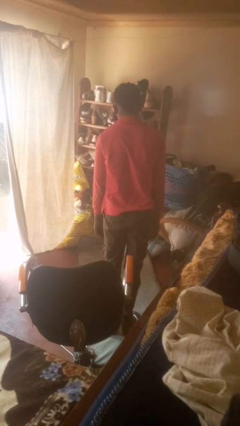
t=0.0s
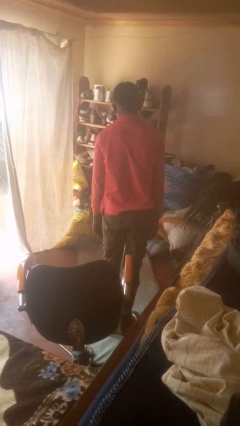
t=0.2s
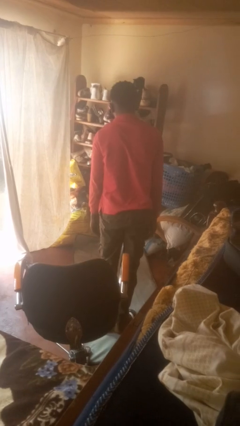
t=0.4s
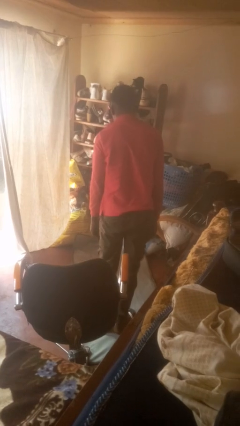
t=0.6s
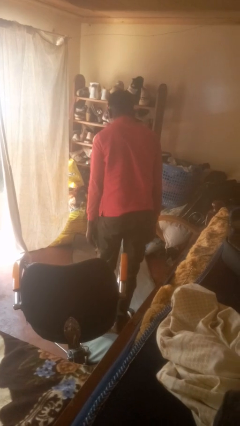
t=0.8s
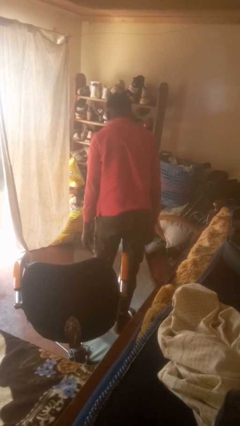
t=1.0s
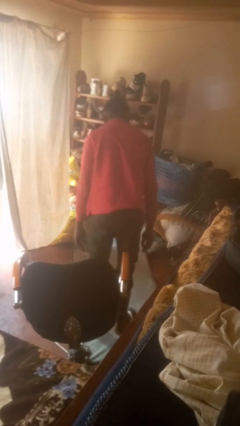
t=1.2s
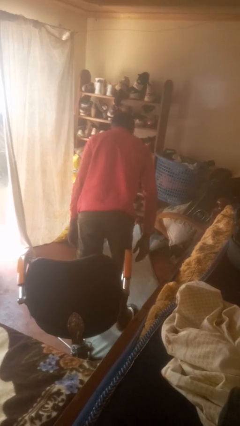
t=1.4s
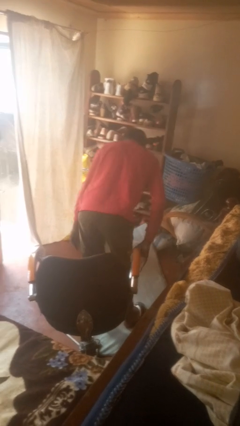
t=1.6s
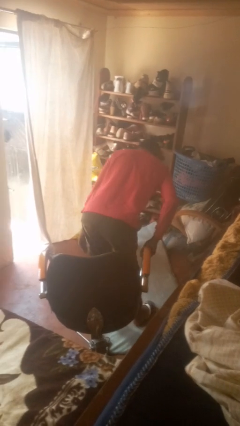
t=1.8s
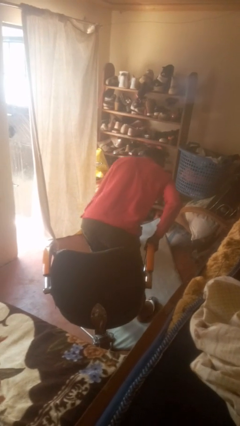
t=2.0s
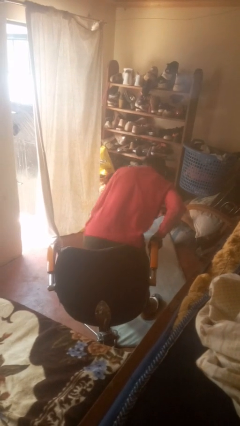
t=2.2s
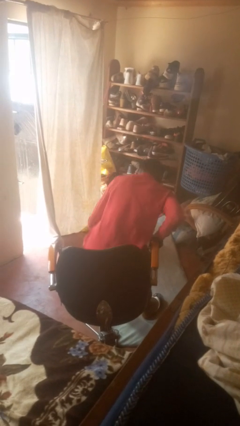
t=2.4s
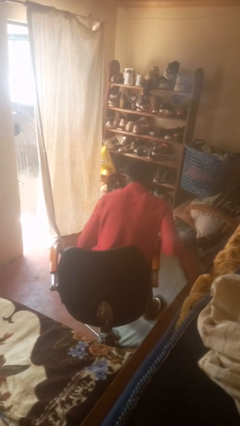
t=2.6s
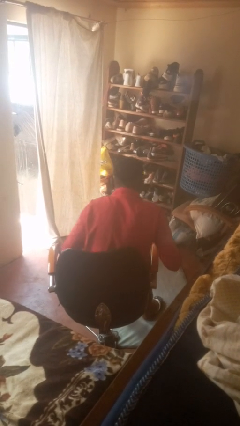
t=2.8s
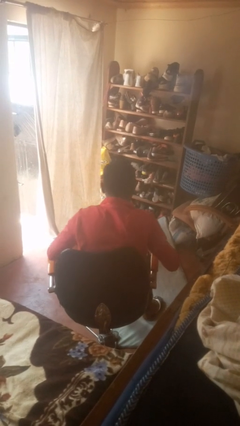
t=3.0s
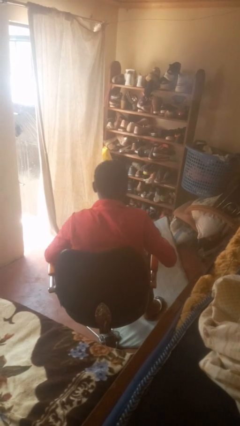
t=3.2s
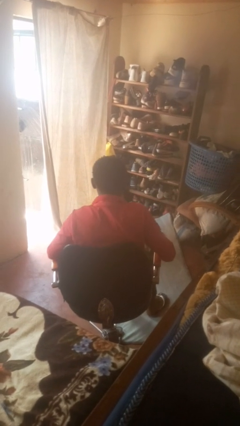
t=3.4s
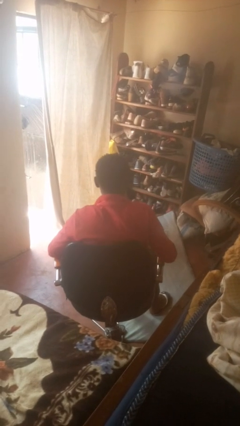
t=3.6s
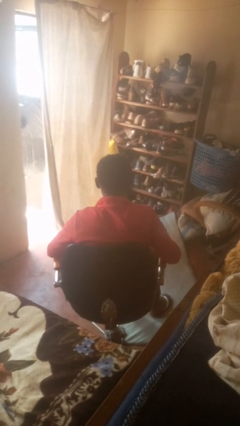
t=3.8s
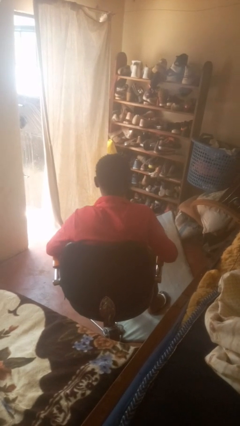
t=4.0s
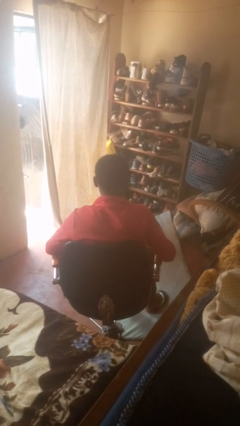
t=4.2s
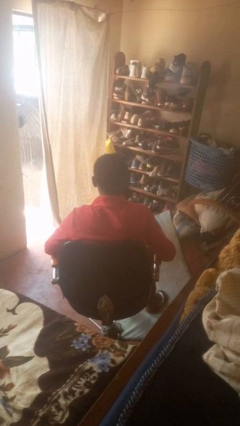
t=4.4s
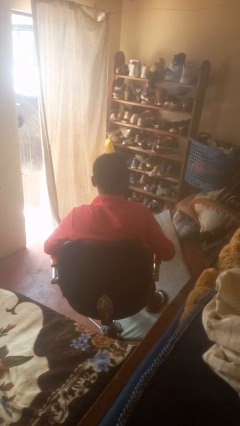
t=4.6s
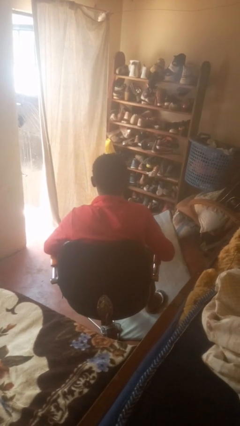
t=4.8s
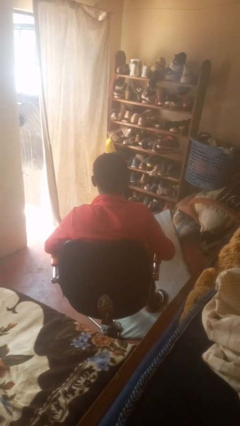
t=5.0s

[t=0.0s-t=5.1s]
person sits down

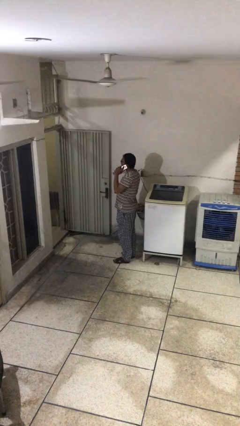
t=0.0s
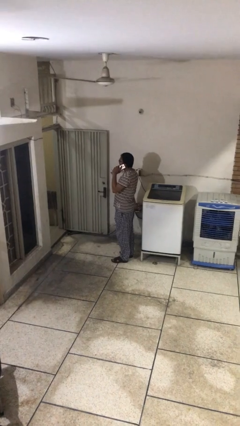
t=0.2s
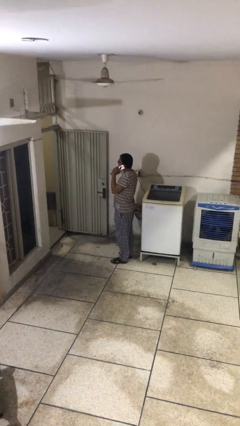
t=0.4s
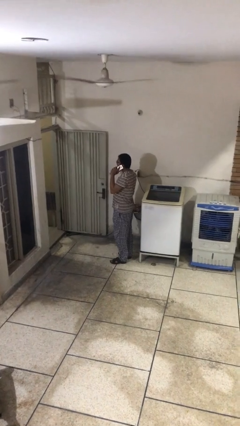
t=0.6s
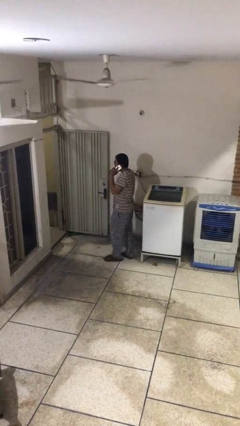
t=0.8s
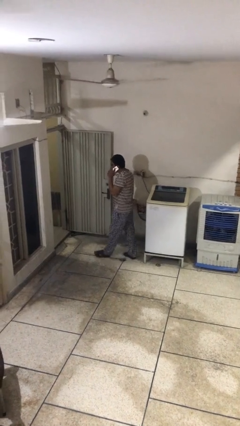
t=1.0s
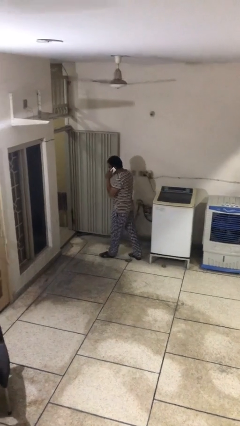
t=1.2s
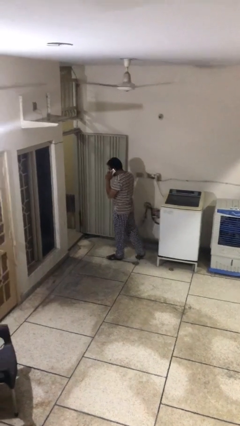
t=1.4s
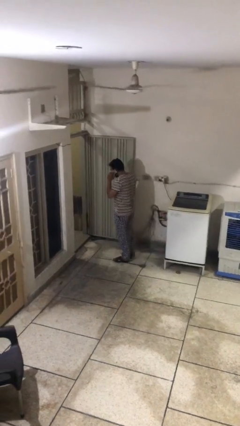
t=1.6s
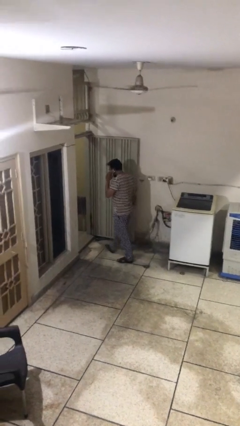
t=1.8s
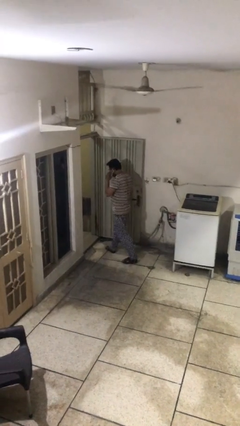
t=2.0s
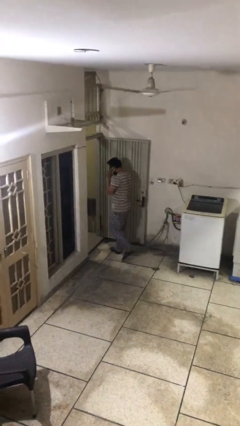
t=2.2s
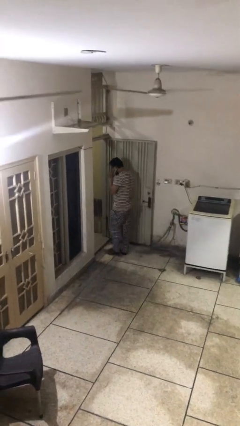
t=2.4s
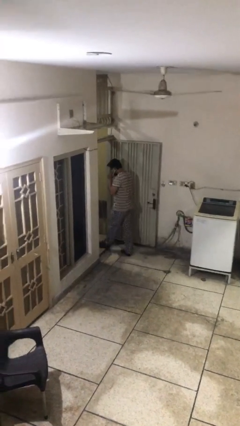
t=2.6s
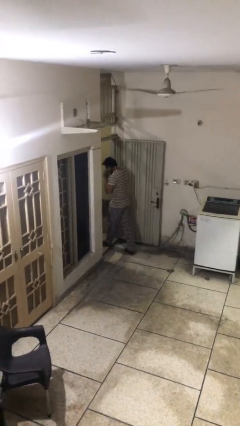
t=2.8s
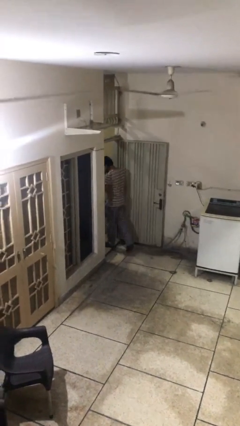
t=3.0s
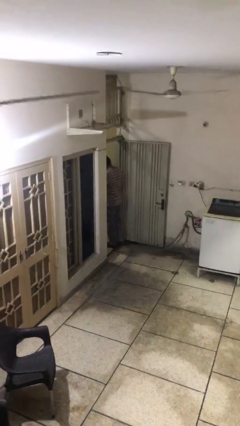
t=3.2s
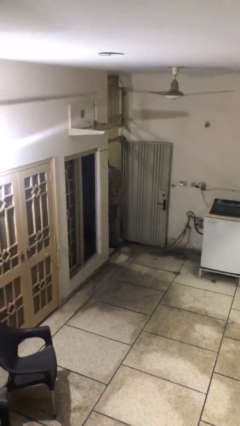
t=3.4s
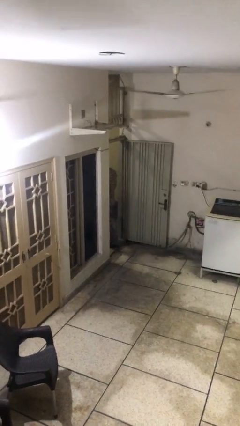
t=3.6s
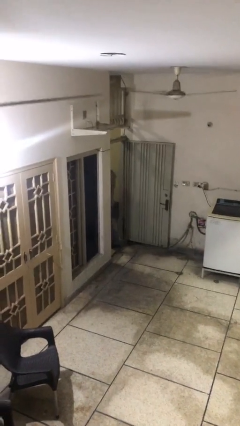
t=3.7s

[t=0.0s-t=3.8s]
person exits scene through structure

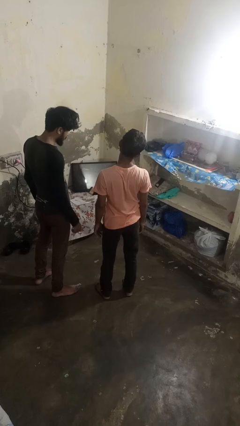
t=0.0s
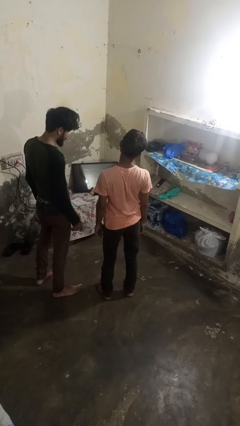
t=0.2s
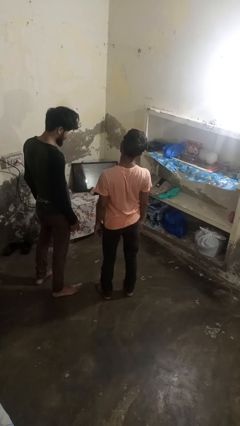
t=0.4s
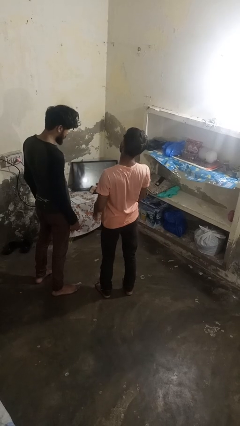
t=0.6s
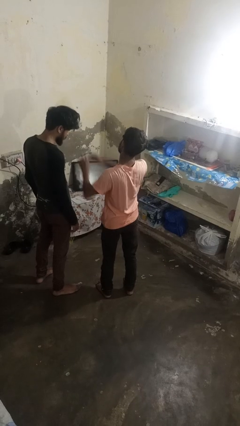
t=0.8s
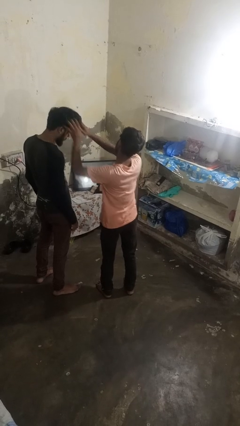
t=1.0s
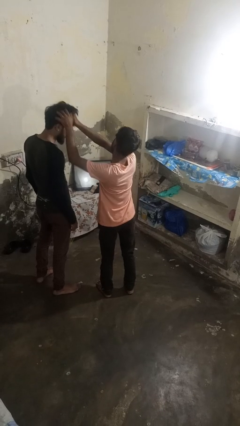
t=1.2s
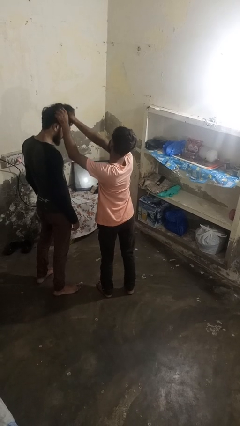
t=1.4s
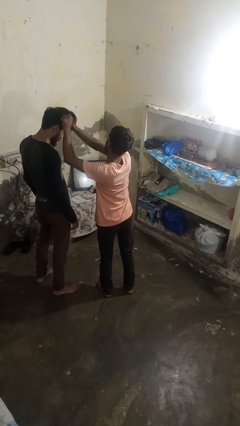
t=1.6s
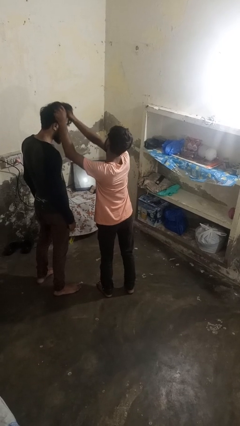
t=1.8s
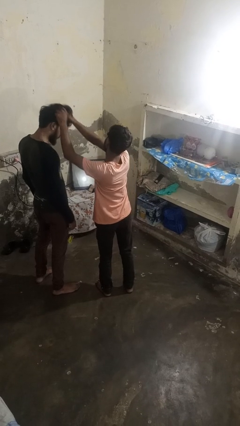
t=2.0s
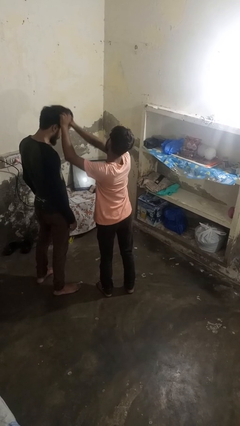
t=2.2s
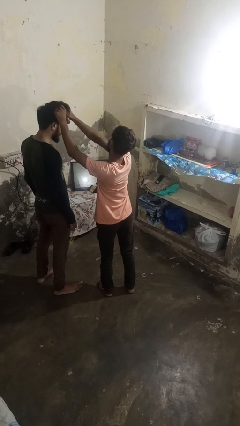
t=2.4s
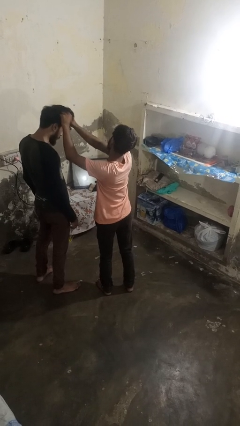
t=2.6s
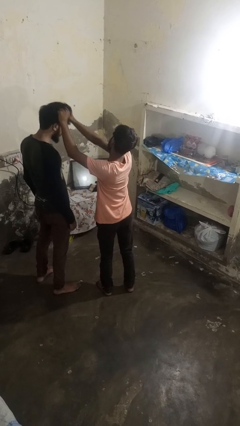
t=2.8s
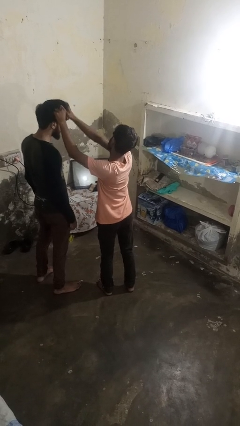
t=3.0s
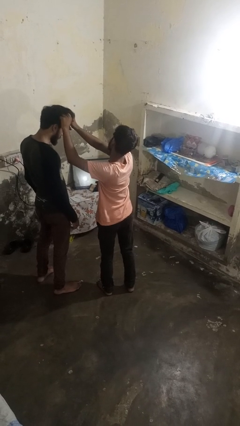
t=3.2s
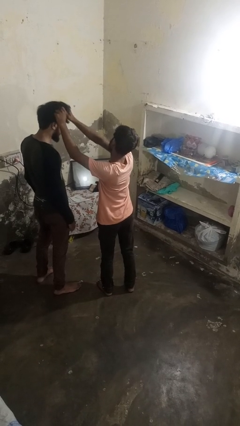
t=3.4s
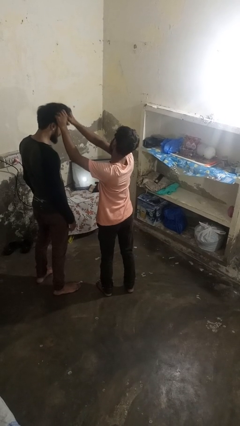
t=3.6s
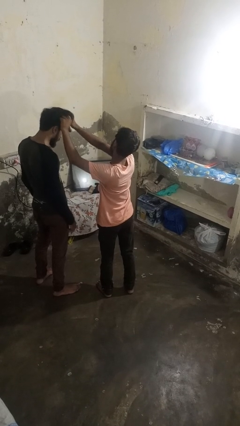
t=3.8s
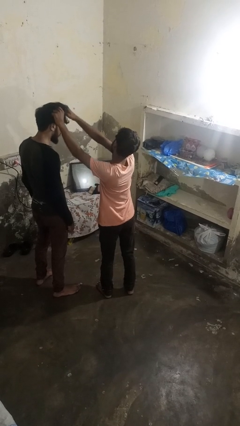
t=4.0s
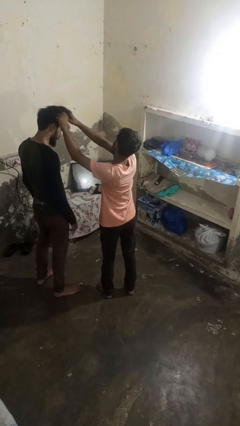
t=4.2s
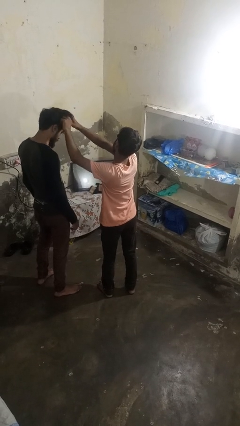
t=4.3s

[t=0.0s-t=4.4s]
person grabs person by hair

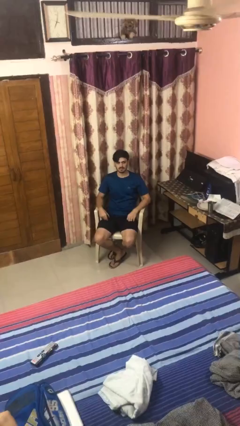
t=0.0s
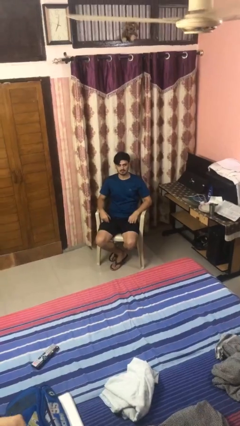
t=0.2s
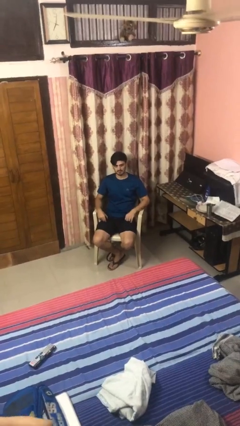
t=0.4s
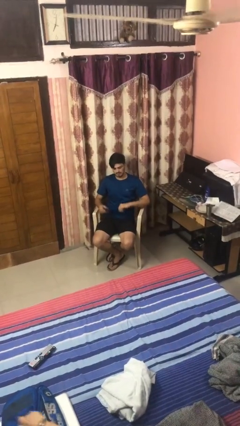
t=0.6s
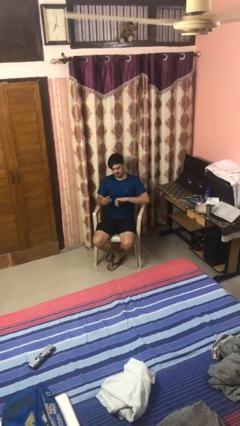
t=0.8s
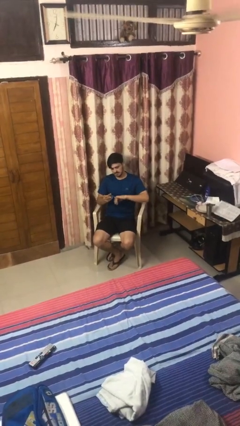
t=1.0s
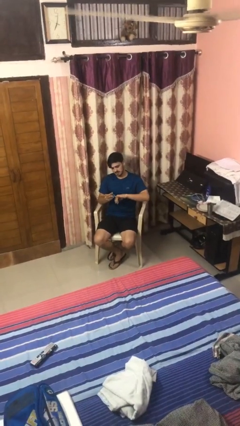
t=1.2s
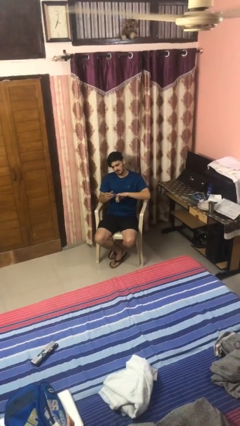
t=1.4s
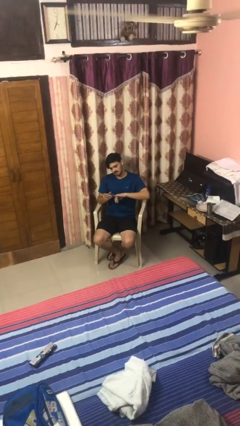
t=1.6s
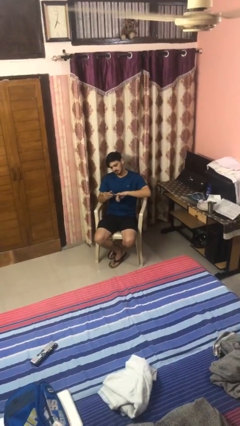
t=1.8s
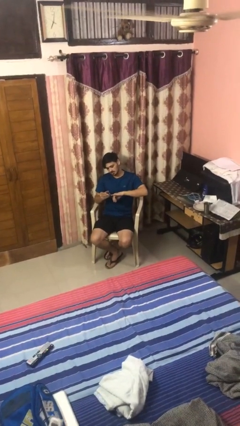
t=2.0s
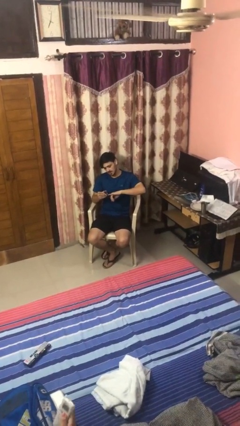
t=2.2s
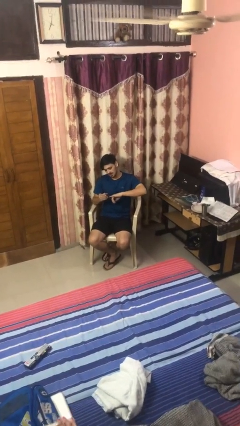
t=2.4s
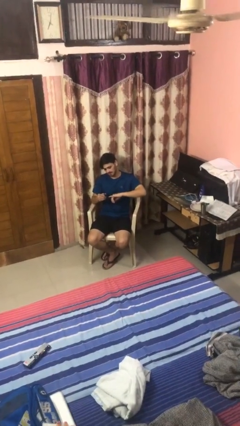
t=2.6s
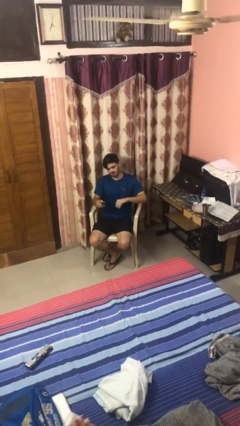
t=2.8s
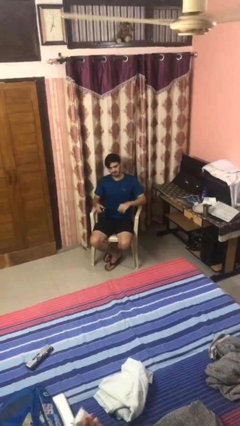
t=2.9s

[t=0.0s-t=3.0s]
person clips fingernails

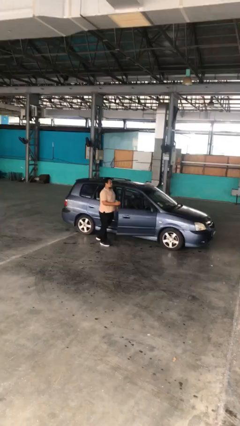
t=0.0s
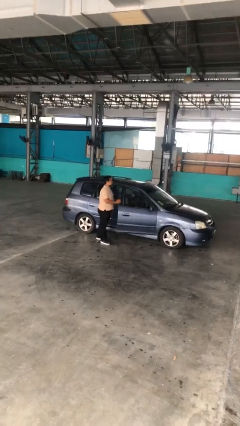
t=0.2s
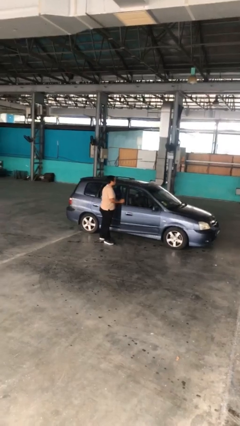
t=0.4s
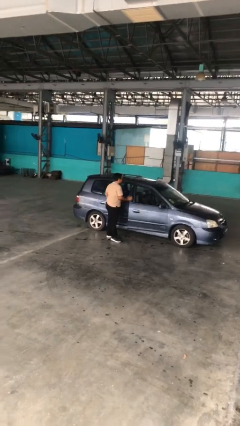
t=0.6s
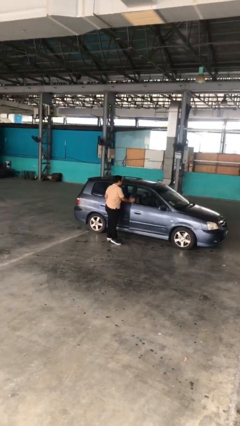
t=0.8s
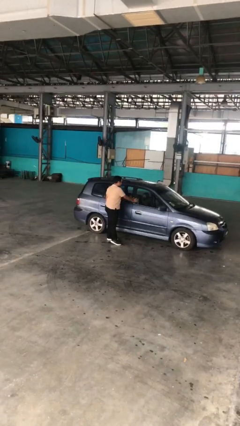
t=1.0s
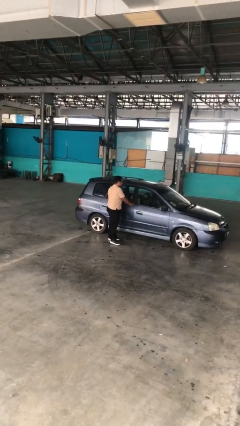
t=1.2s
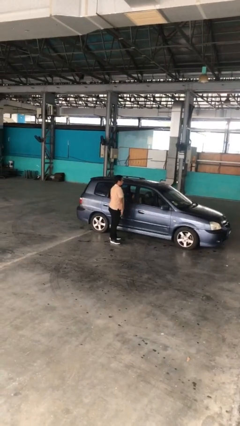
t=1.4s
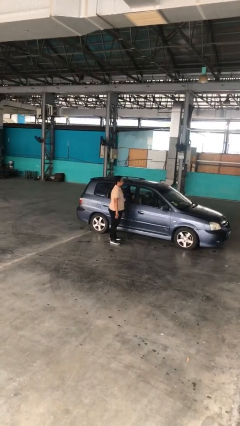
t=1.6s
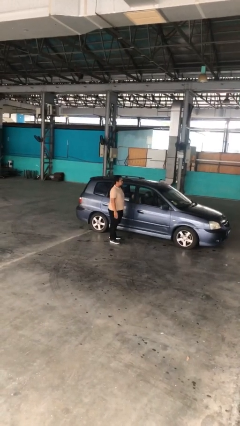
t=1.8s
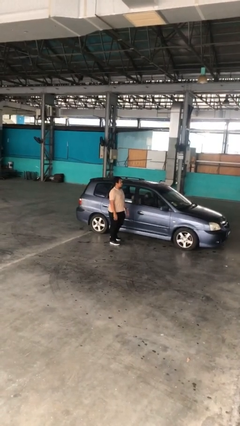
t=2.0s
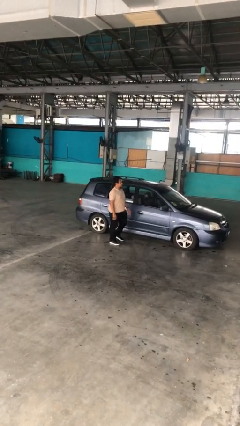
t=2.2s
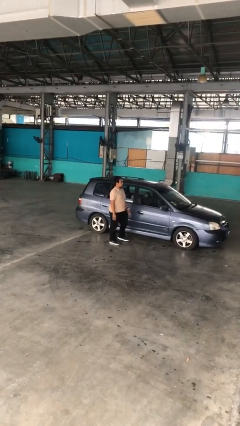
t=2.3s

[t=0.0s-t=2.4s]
person closes car door
